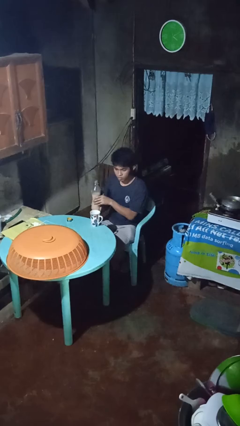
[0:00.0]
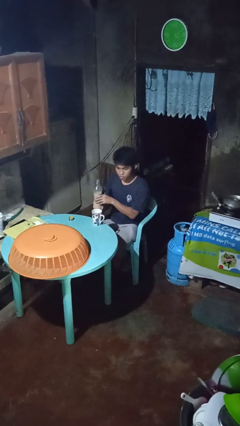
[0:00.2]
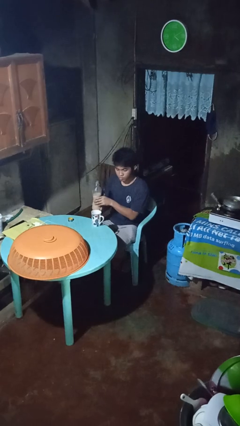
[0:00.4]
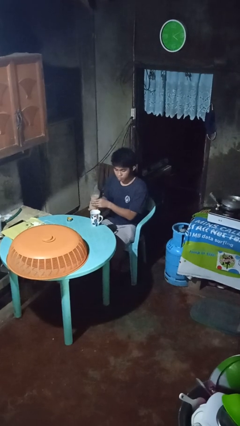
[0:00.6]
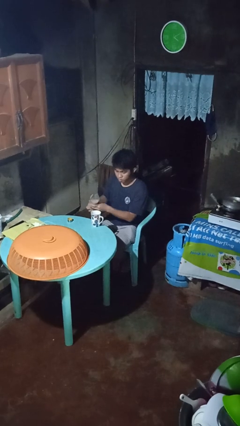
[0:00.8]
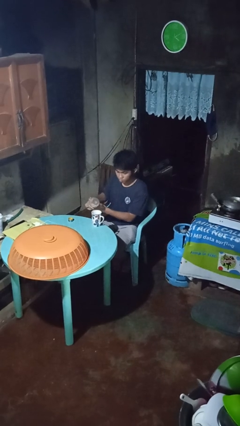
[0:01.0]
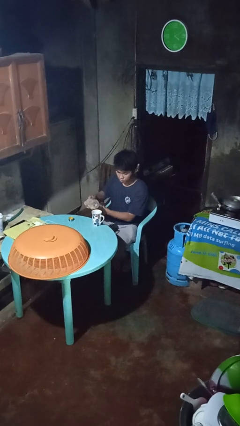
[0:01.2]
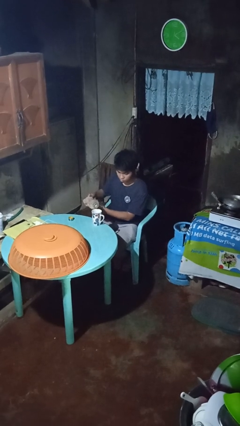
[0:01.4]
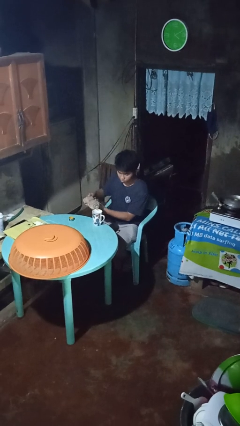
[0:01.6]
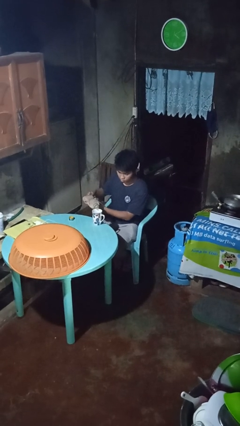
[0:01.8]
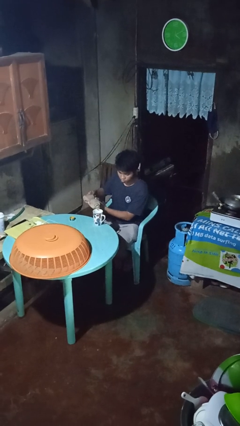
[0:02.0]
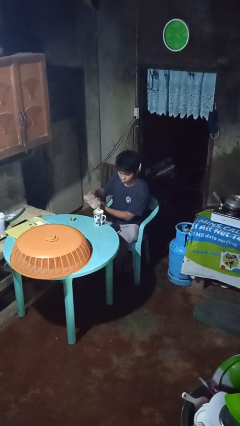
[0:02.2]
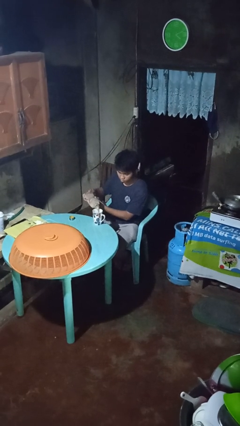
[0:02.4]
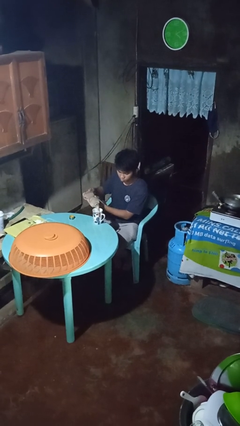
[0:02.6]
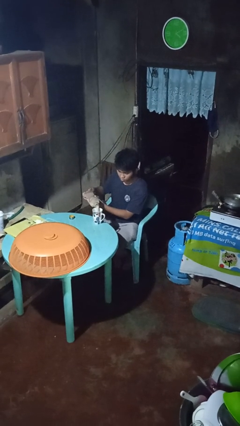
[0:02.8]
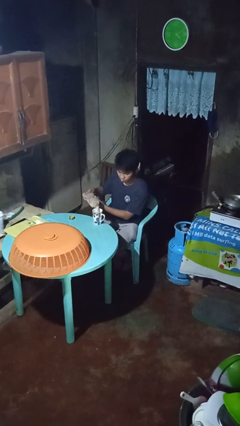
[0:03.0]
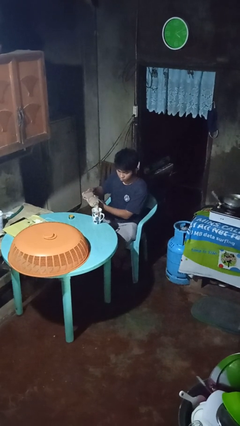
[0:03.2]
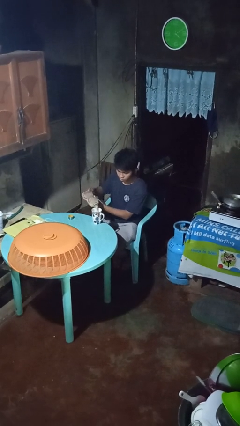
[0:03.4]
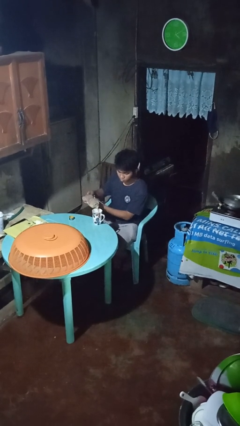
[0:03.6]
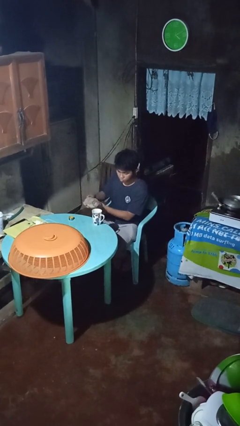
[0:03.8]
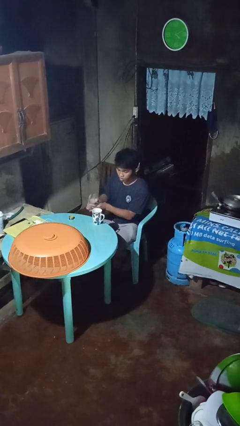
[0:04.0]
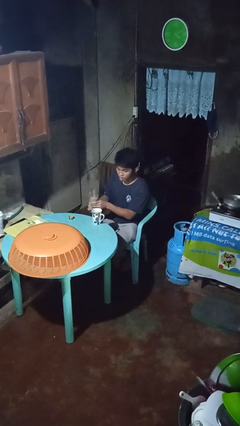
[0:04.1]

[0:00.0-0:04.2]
person pours coffee into mug

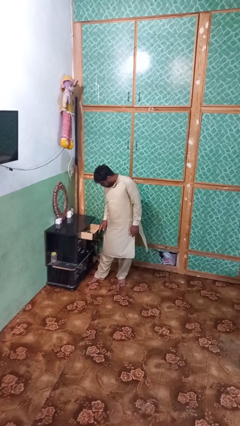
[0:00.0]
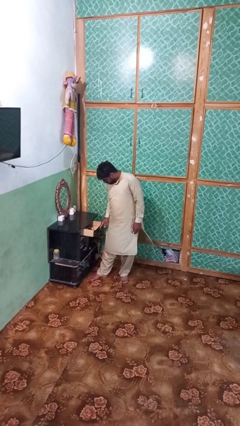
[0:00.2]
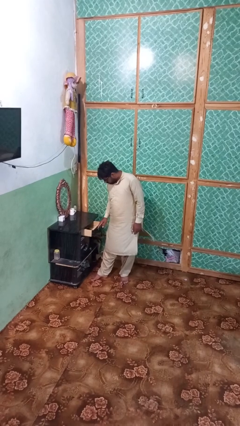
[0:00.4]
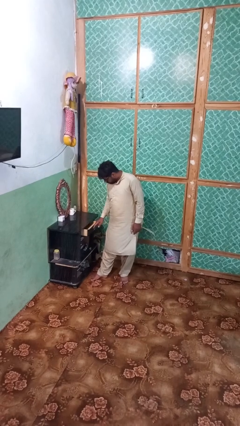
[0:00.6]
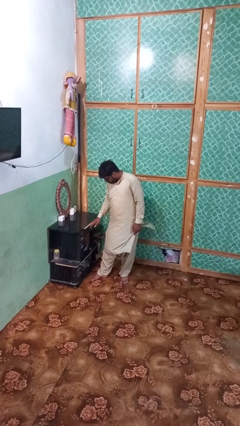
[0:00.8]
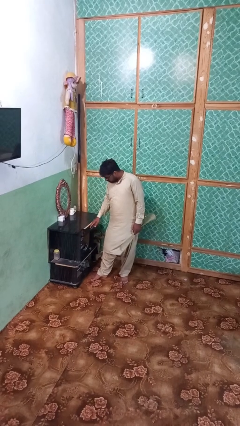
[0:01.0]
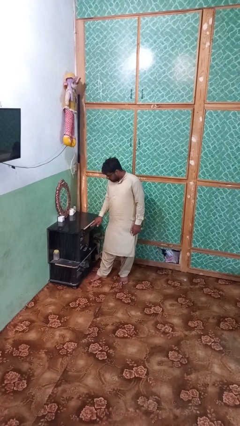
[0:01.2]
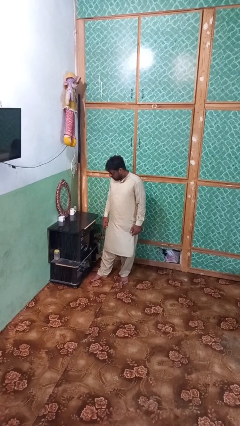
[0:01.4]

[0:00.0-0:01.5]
person closes dresser drawer

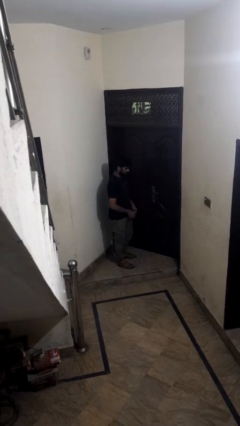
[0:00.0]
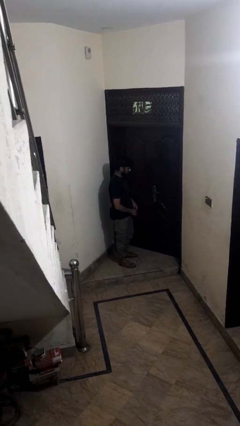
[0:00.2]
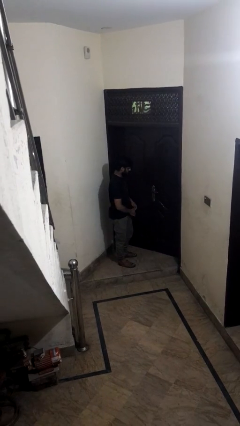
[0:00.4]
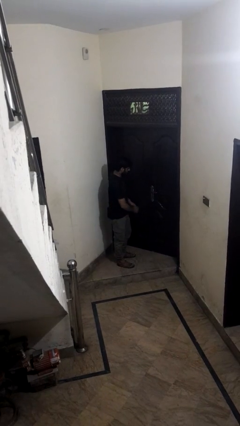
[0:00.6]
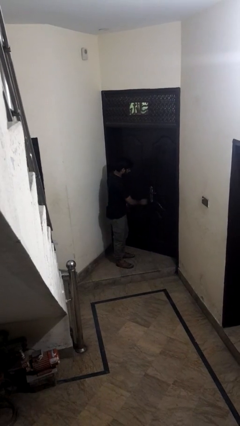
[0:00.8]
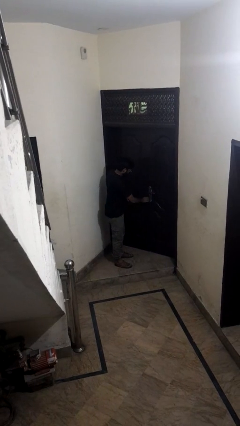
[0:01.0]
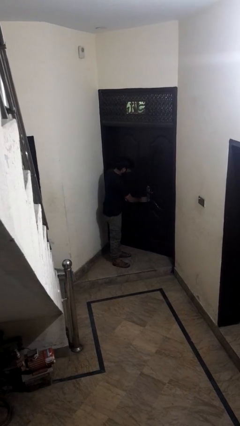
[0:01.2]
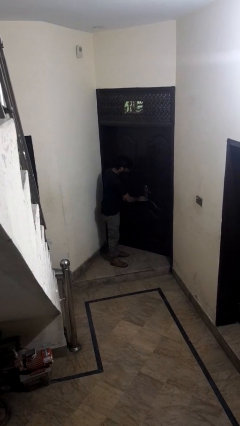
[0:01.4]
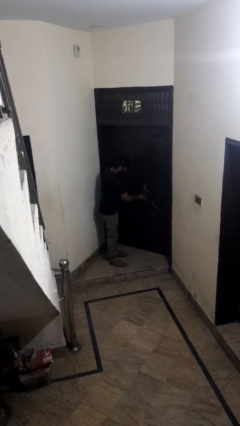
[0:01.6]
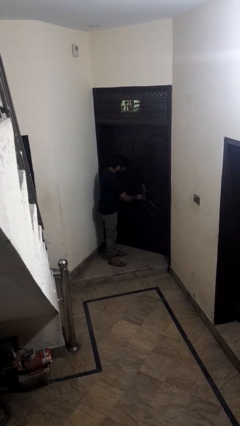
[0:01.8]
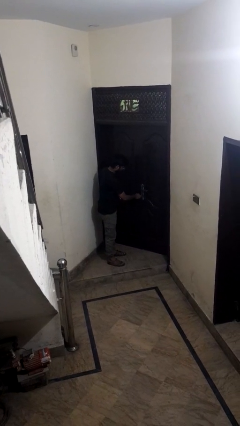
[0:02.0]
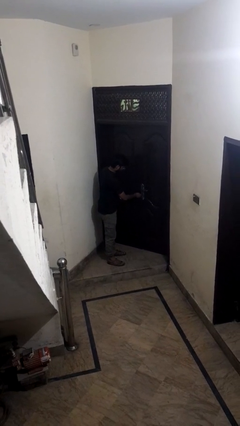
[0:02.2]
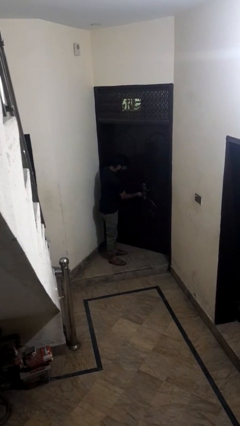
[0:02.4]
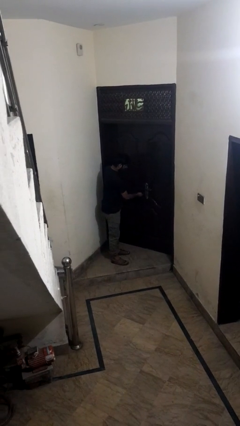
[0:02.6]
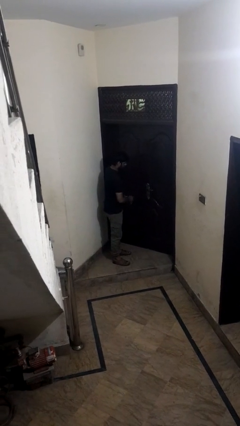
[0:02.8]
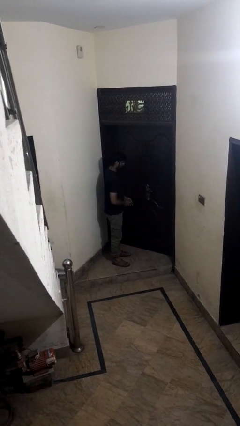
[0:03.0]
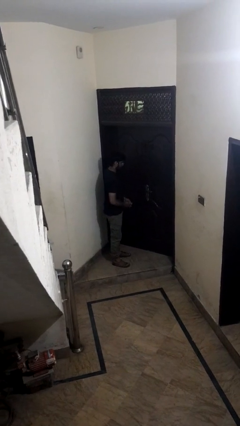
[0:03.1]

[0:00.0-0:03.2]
person unlocks door with keys

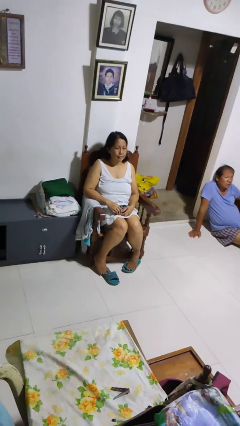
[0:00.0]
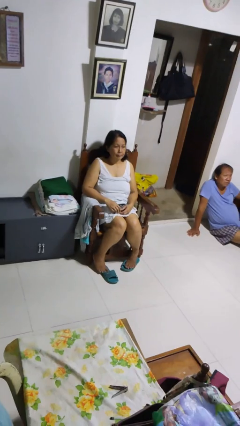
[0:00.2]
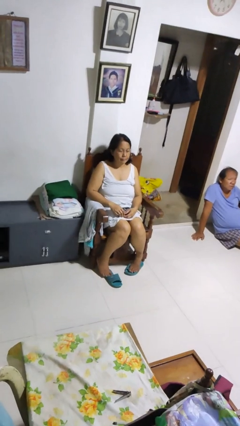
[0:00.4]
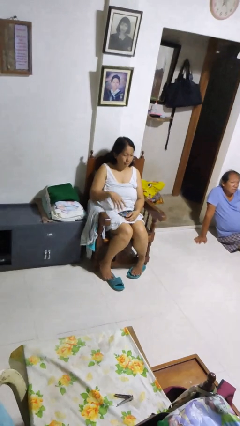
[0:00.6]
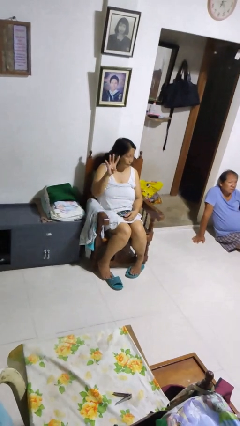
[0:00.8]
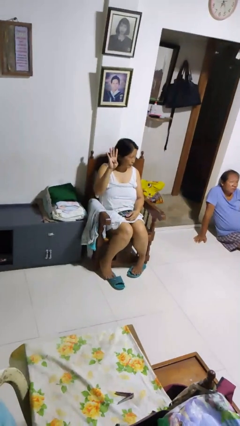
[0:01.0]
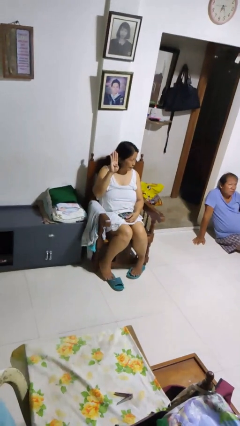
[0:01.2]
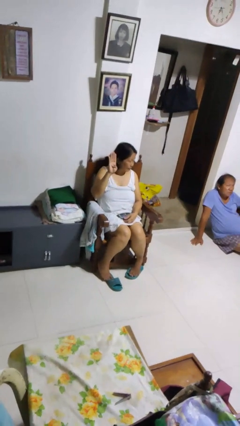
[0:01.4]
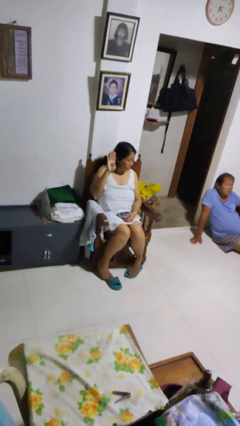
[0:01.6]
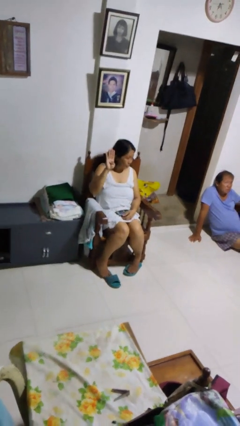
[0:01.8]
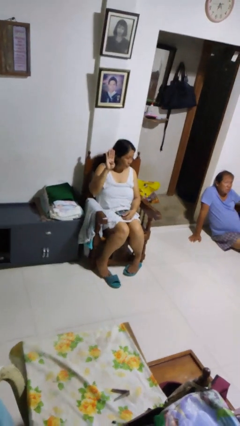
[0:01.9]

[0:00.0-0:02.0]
person gestures number four

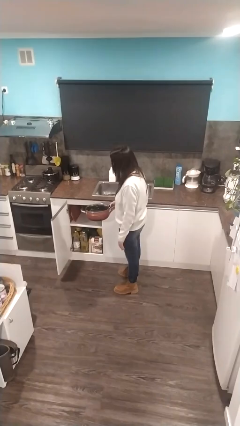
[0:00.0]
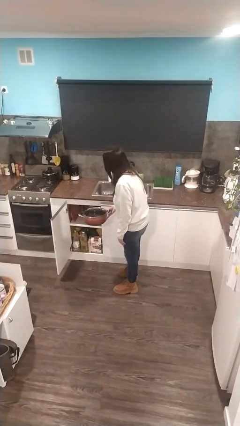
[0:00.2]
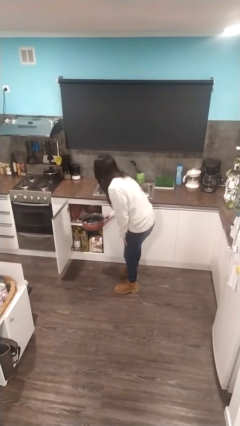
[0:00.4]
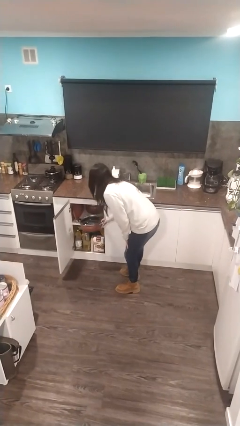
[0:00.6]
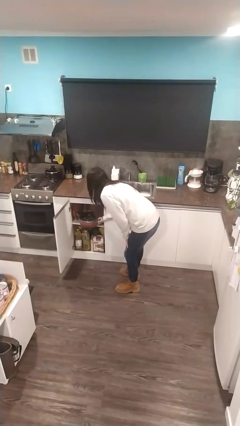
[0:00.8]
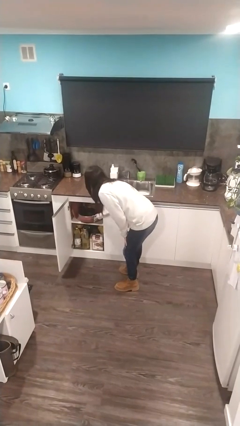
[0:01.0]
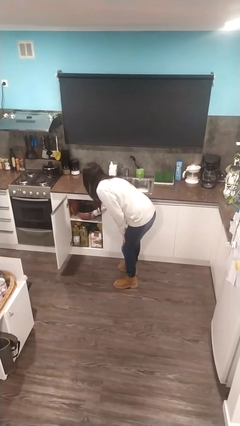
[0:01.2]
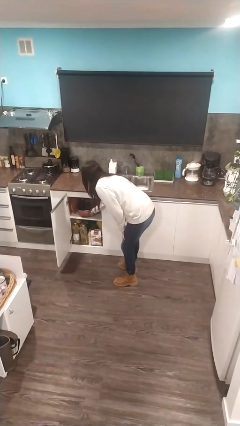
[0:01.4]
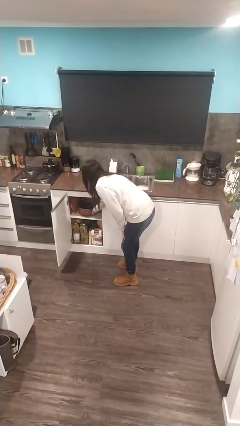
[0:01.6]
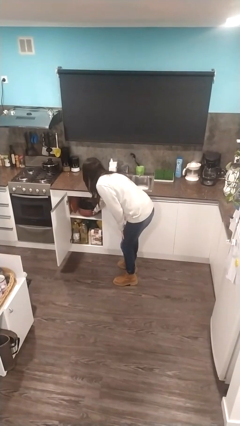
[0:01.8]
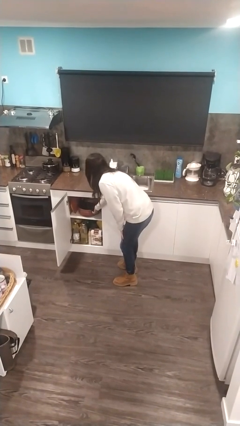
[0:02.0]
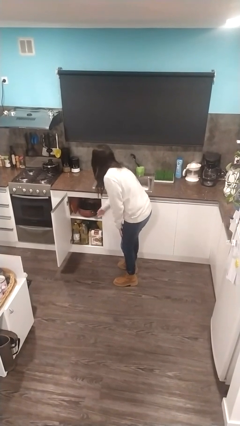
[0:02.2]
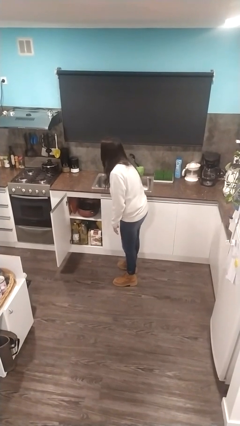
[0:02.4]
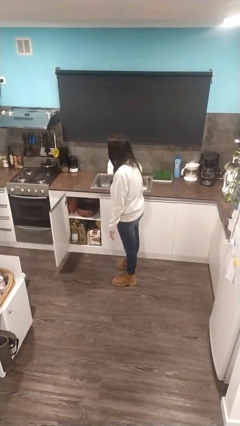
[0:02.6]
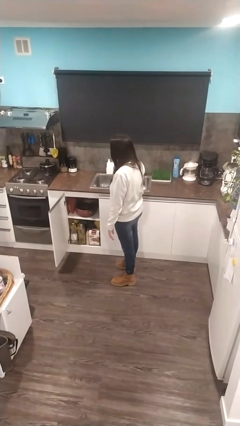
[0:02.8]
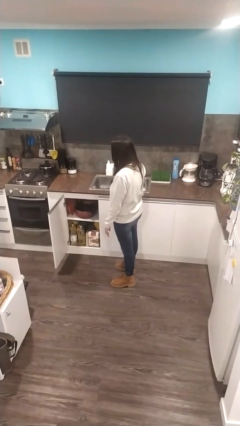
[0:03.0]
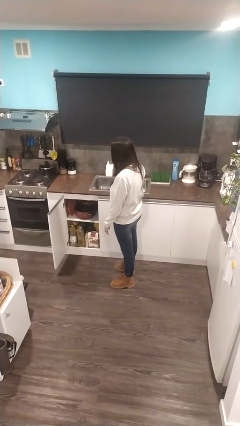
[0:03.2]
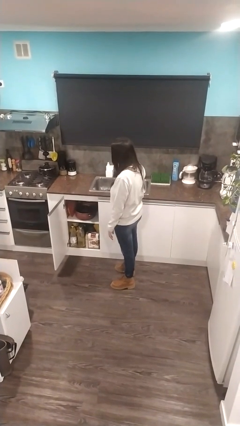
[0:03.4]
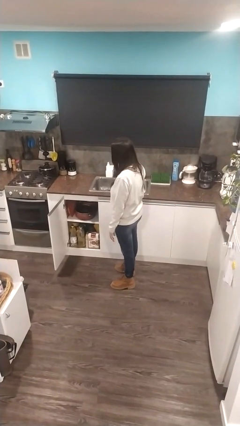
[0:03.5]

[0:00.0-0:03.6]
person puts down object into cabinet

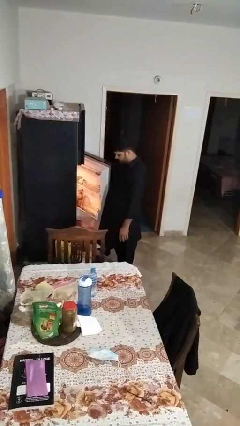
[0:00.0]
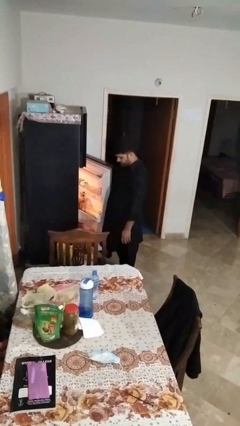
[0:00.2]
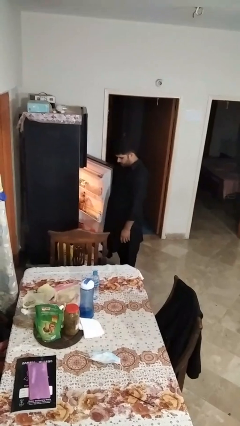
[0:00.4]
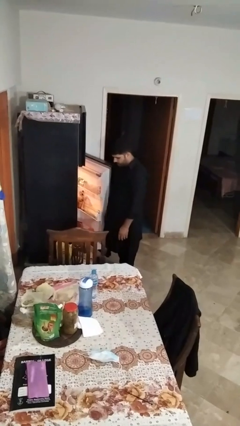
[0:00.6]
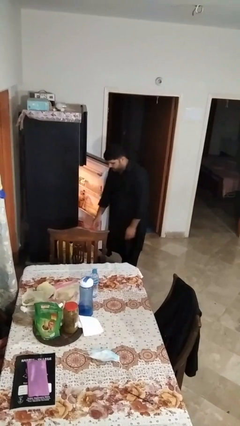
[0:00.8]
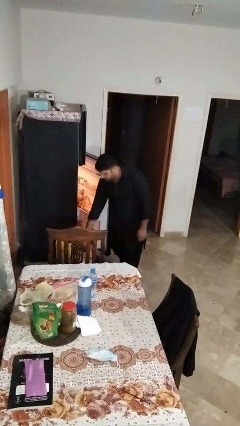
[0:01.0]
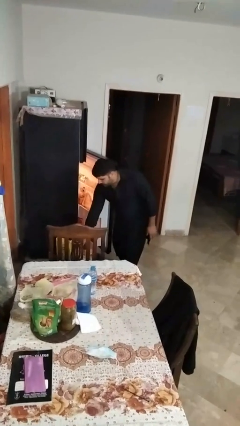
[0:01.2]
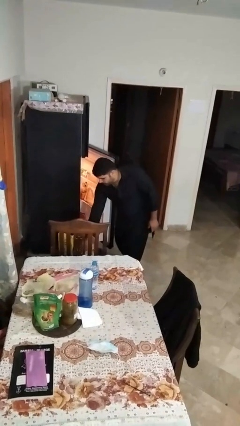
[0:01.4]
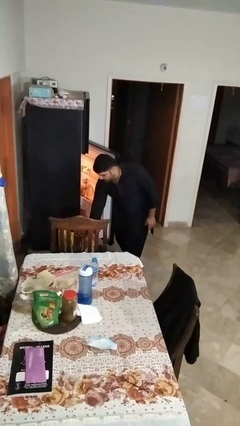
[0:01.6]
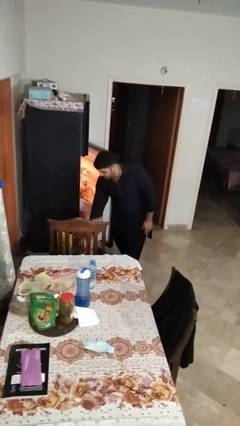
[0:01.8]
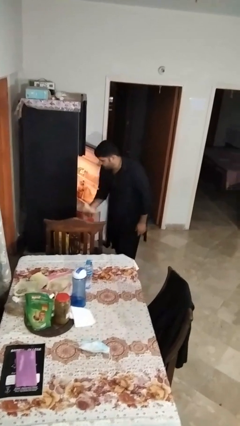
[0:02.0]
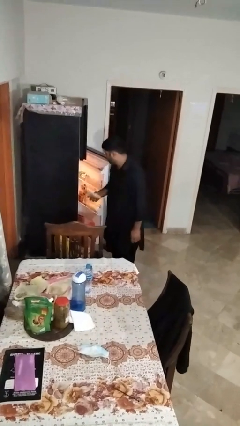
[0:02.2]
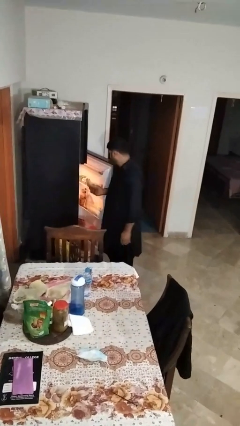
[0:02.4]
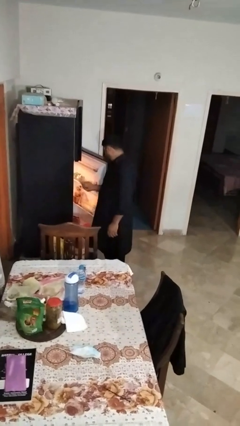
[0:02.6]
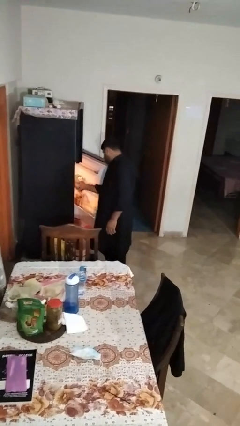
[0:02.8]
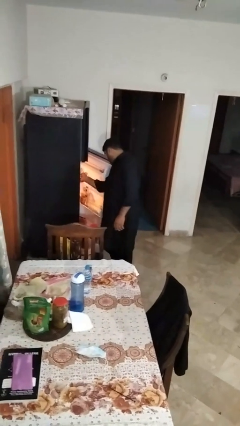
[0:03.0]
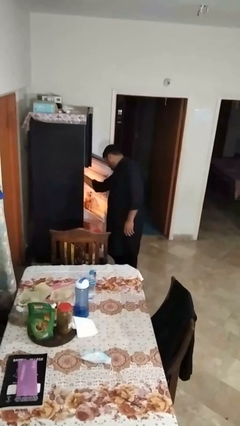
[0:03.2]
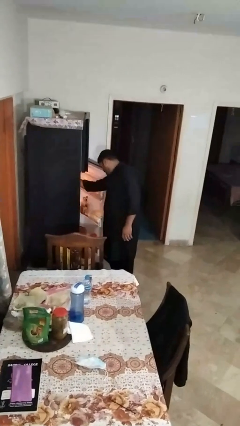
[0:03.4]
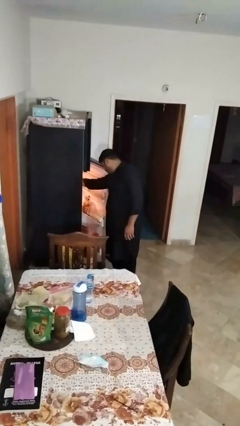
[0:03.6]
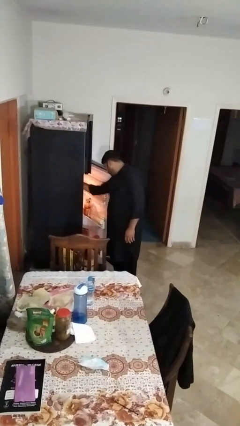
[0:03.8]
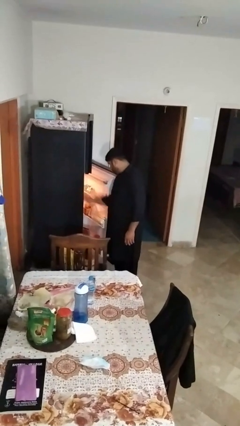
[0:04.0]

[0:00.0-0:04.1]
person loads groceries into refrigerator
